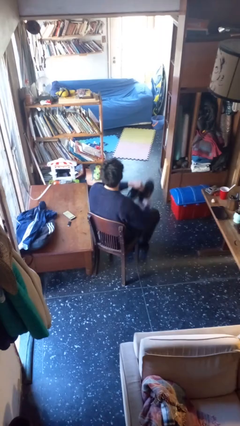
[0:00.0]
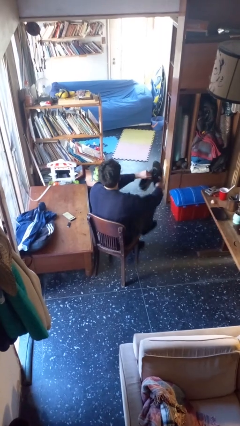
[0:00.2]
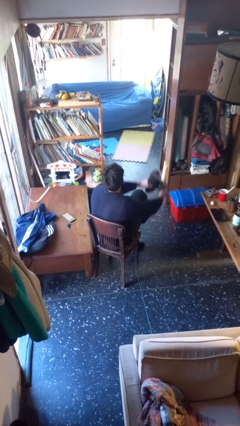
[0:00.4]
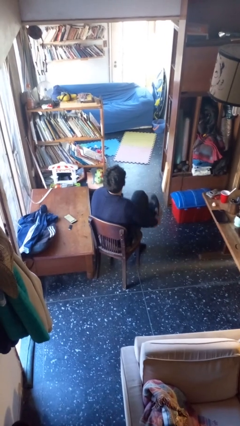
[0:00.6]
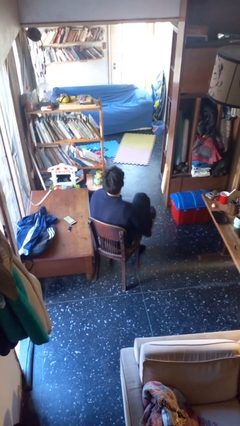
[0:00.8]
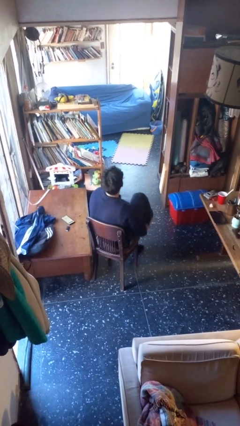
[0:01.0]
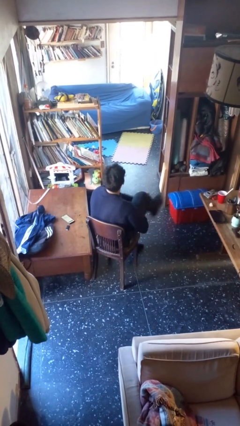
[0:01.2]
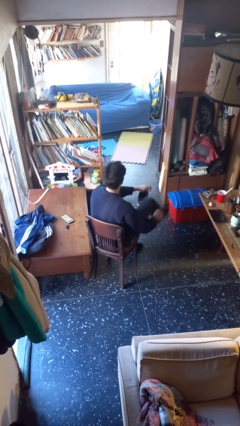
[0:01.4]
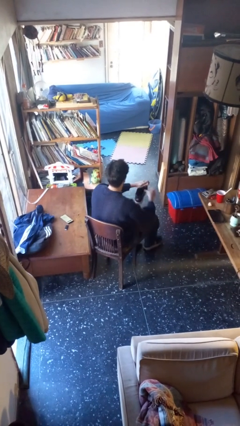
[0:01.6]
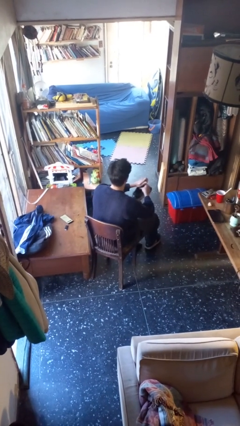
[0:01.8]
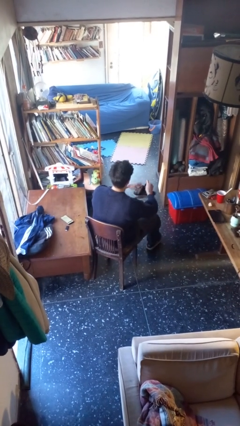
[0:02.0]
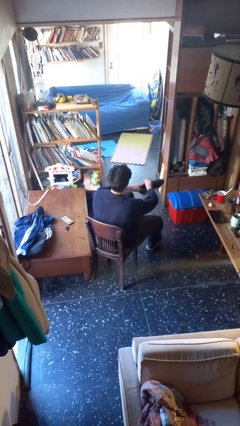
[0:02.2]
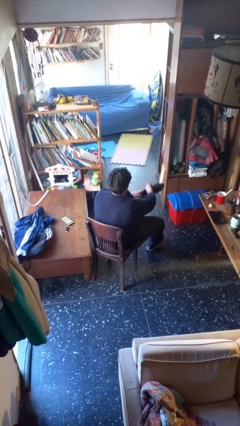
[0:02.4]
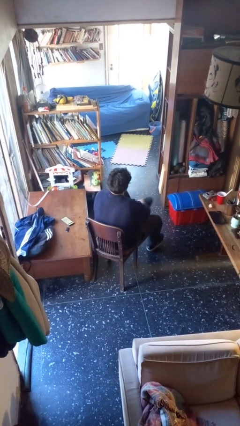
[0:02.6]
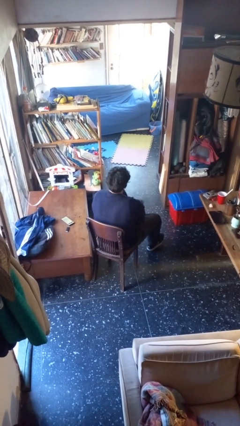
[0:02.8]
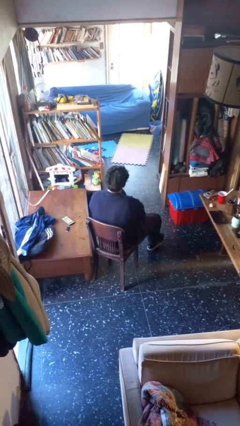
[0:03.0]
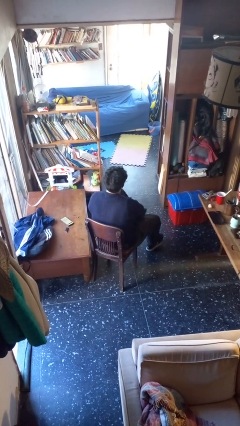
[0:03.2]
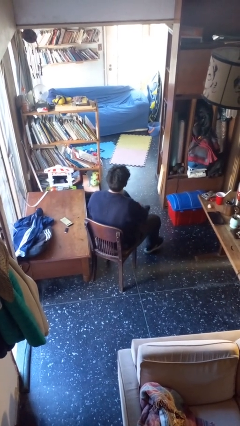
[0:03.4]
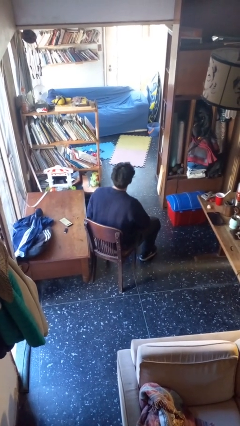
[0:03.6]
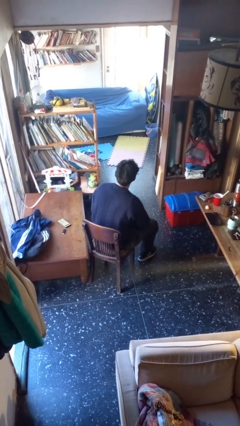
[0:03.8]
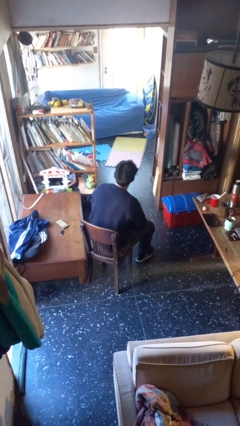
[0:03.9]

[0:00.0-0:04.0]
person puts on shoes

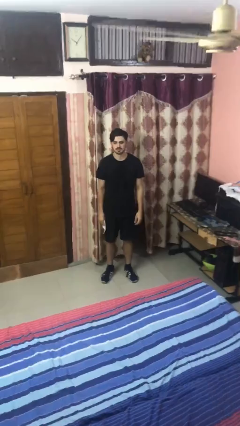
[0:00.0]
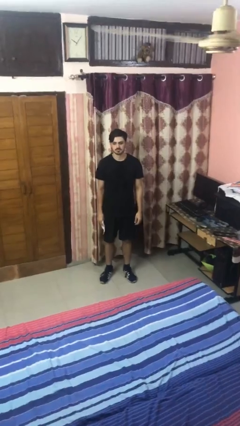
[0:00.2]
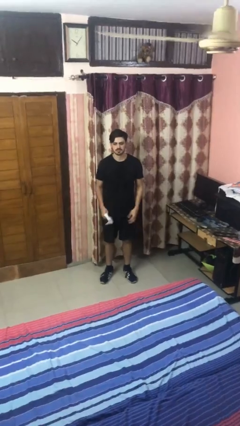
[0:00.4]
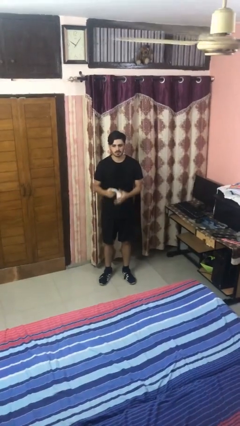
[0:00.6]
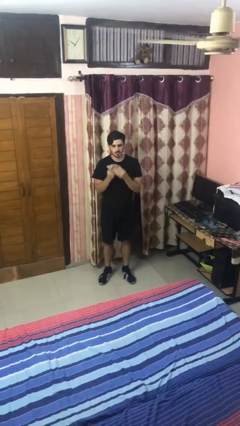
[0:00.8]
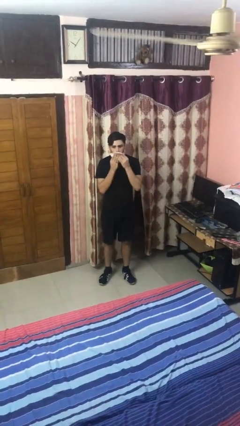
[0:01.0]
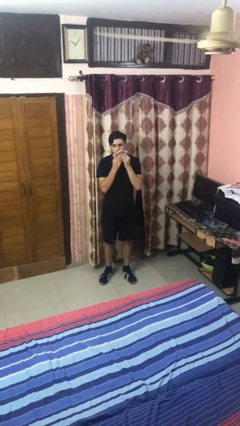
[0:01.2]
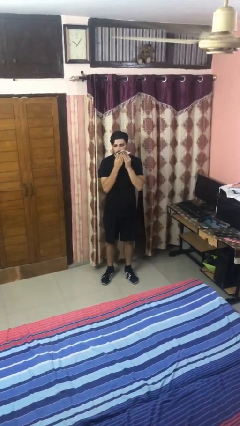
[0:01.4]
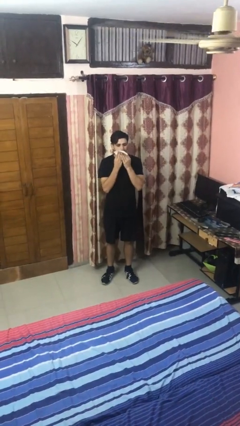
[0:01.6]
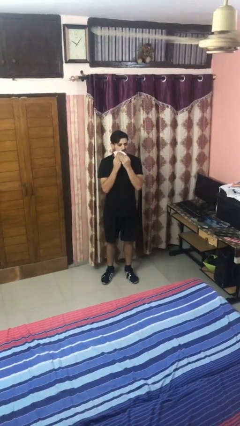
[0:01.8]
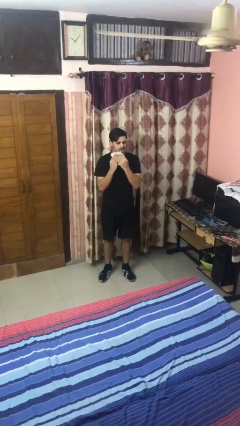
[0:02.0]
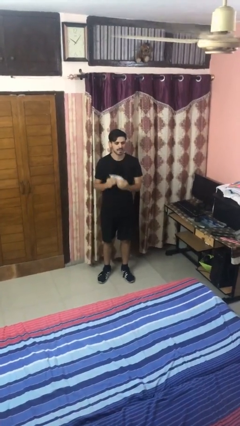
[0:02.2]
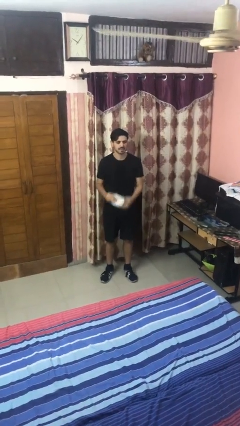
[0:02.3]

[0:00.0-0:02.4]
person wipes mouth with napkin

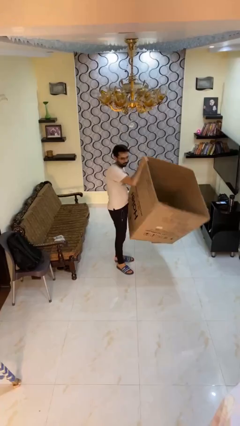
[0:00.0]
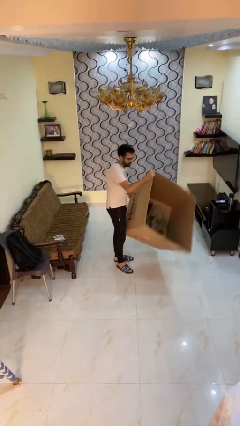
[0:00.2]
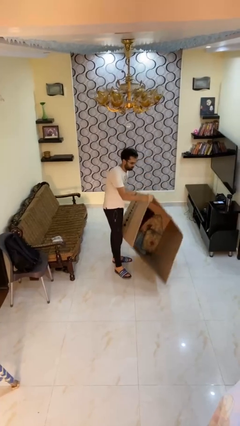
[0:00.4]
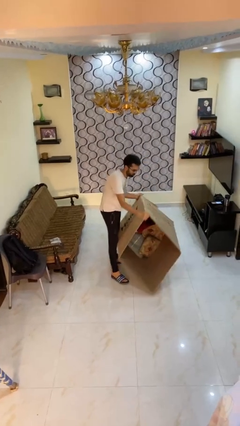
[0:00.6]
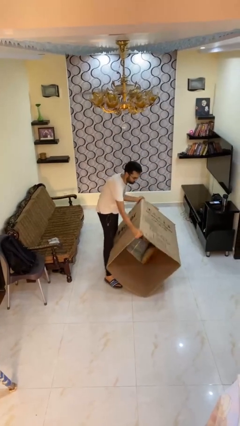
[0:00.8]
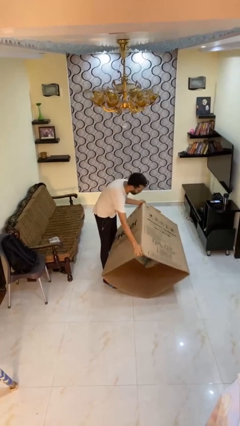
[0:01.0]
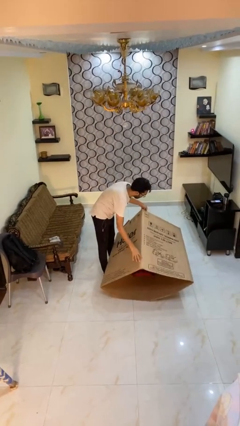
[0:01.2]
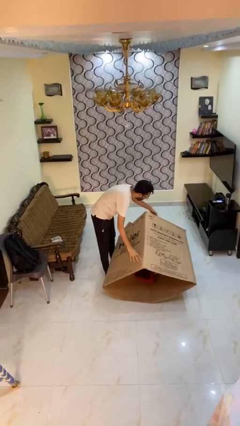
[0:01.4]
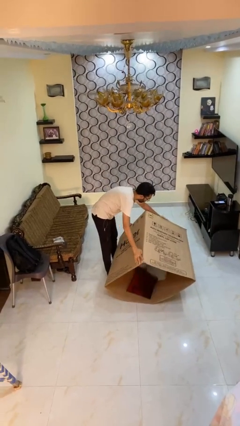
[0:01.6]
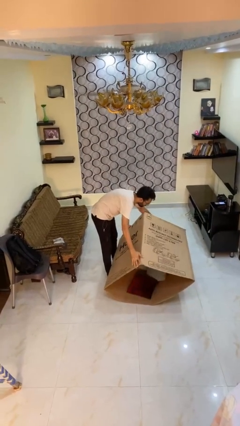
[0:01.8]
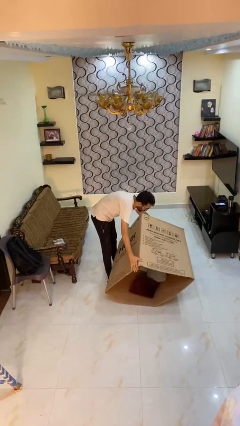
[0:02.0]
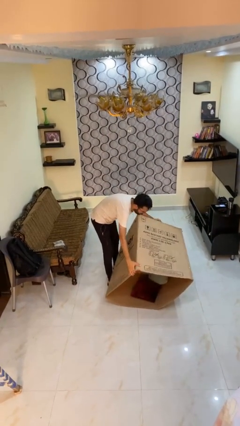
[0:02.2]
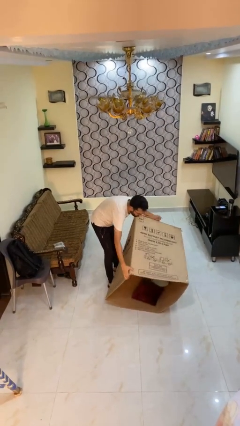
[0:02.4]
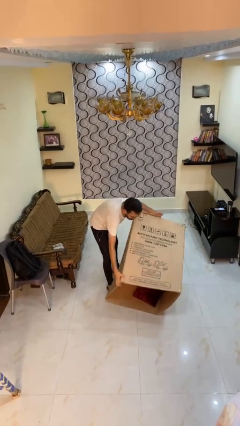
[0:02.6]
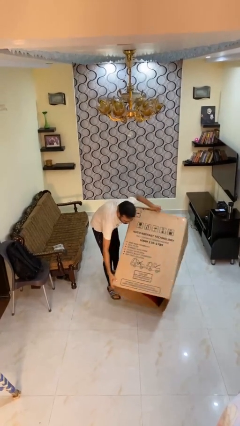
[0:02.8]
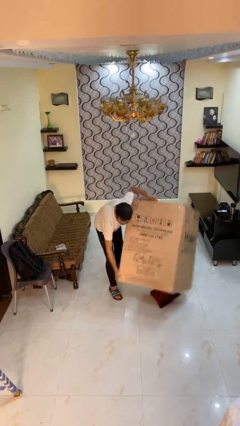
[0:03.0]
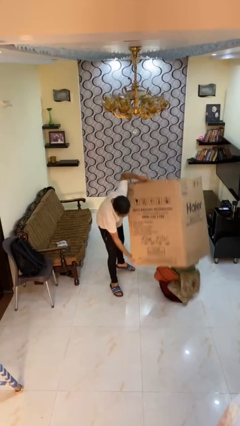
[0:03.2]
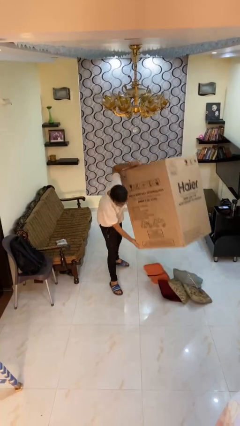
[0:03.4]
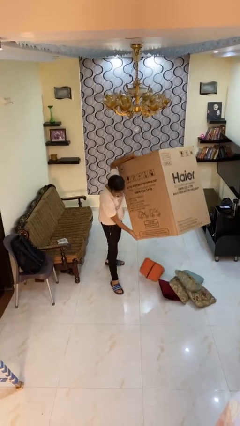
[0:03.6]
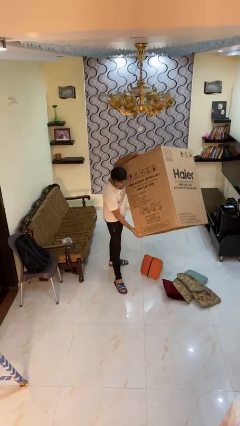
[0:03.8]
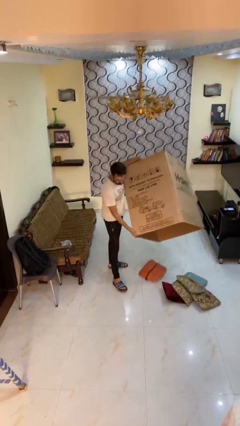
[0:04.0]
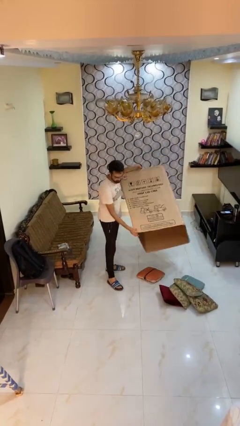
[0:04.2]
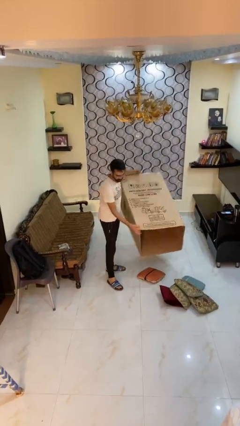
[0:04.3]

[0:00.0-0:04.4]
person unloads box onto floor

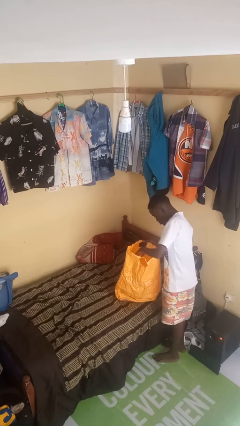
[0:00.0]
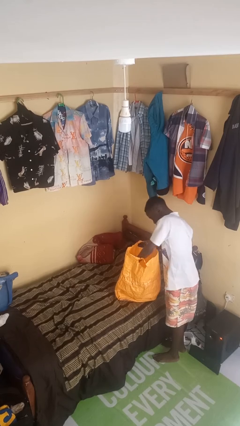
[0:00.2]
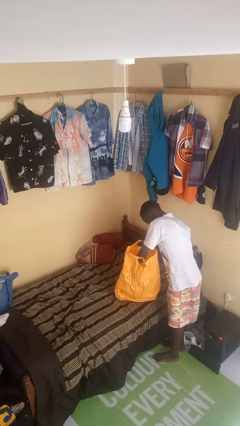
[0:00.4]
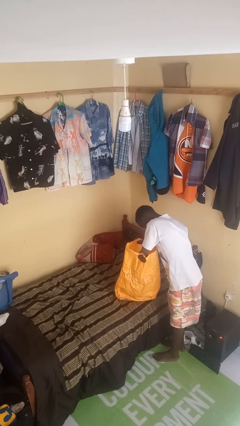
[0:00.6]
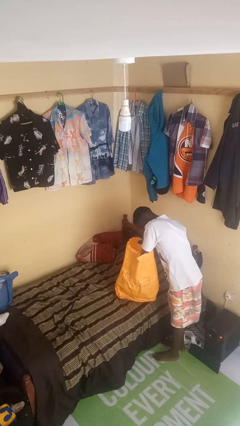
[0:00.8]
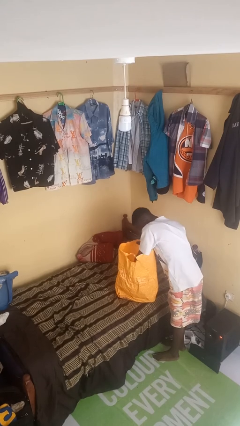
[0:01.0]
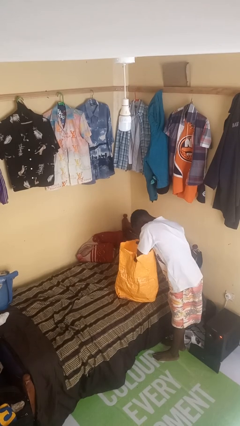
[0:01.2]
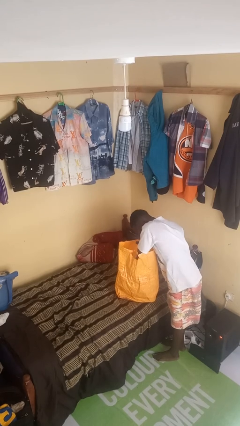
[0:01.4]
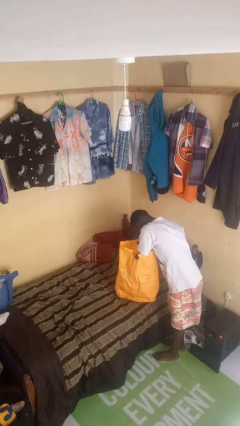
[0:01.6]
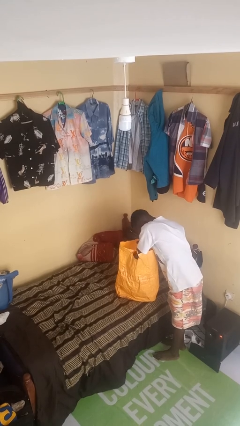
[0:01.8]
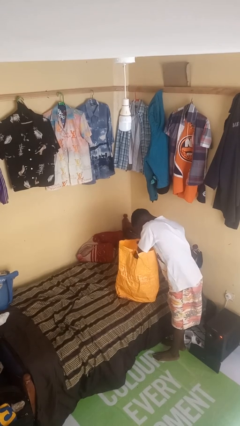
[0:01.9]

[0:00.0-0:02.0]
person searches in bag

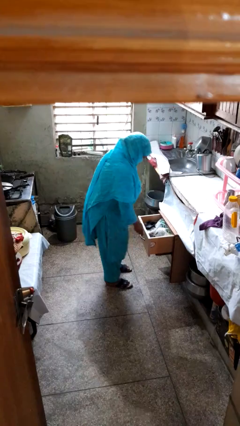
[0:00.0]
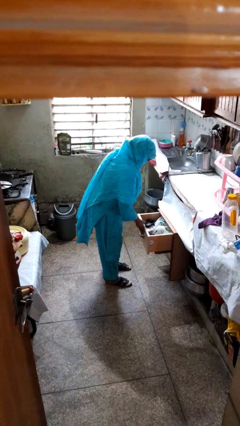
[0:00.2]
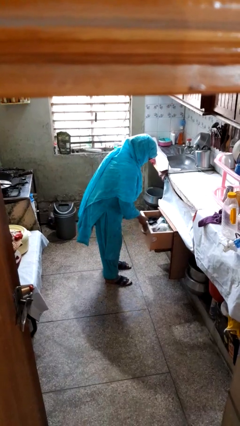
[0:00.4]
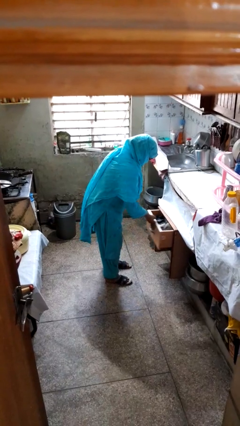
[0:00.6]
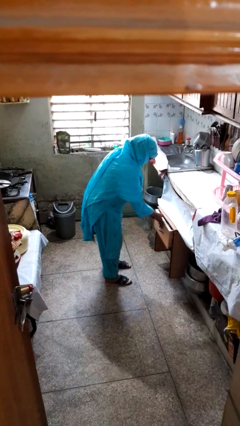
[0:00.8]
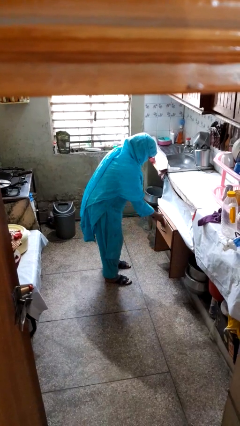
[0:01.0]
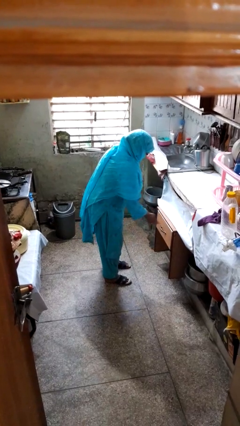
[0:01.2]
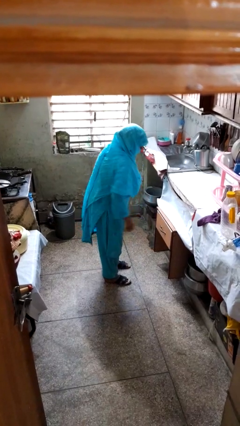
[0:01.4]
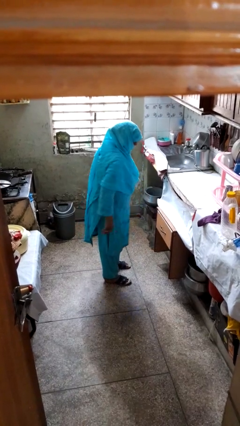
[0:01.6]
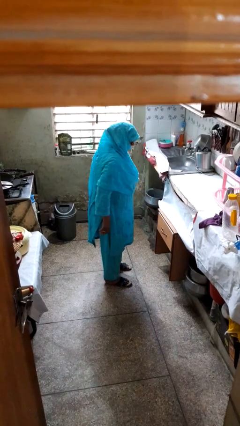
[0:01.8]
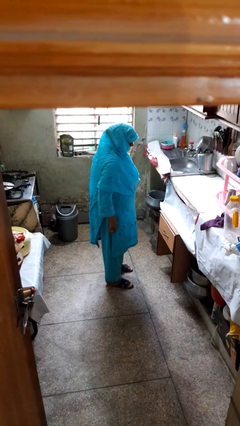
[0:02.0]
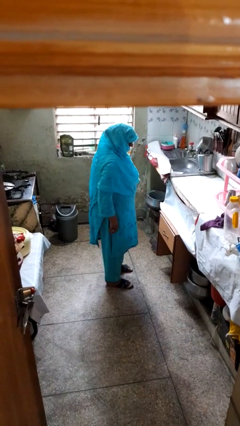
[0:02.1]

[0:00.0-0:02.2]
person closes kitchen drawer

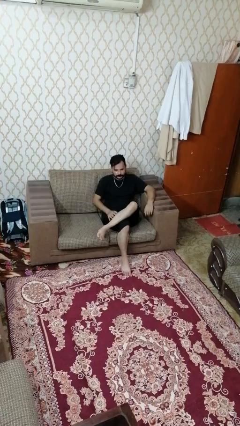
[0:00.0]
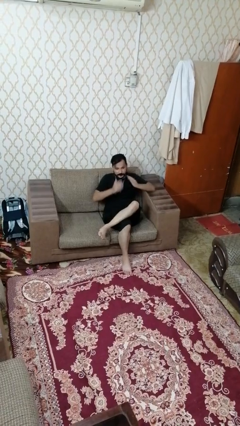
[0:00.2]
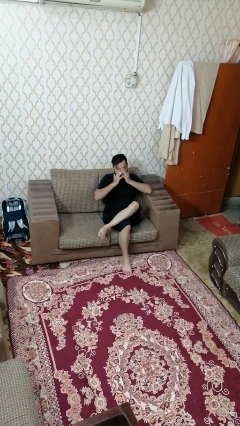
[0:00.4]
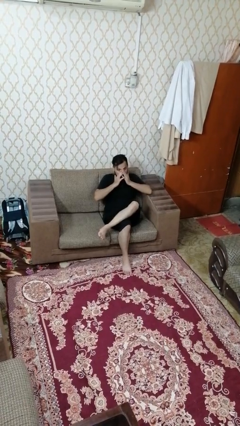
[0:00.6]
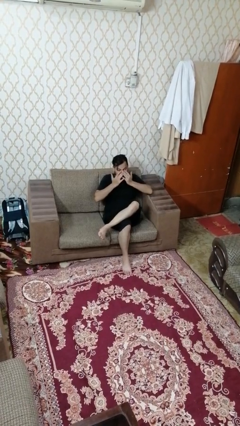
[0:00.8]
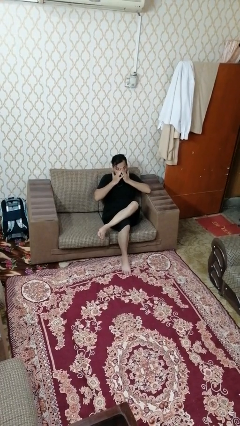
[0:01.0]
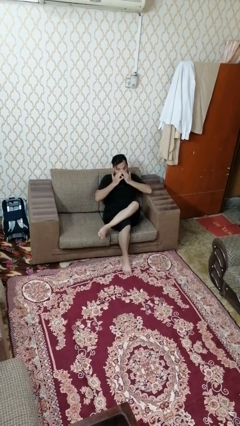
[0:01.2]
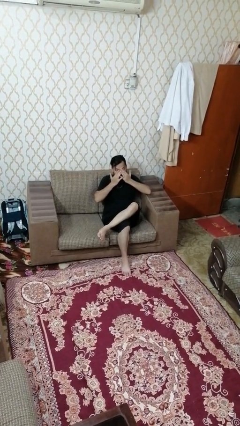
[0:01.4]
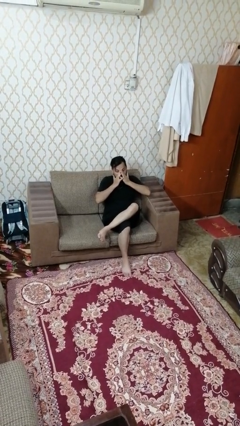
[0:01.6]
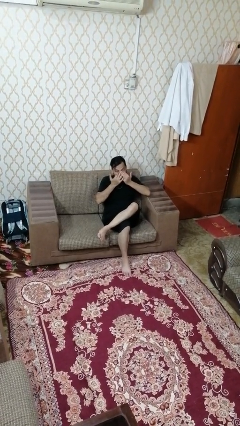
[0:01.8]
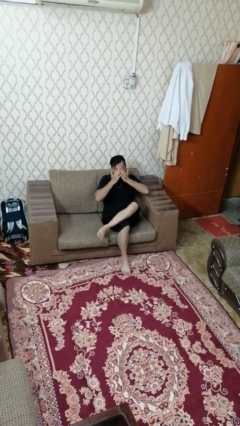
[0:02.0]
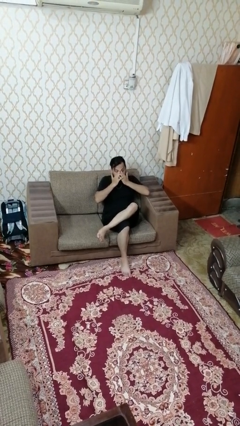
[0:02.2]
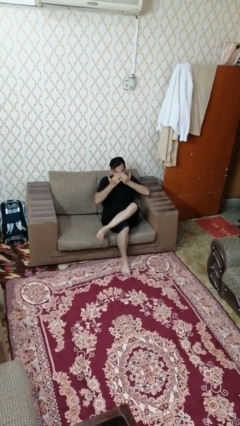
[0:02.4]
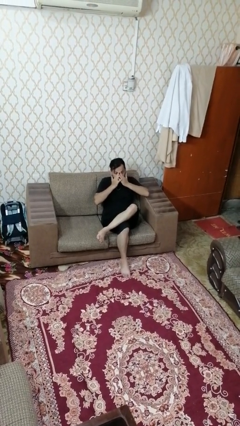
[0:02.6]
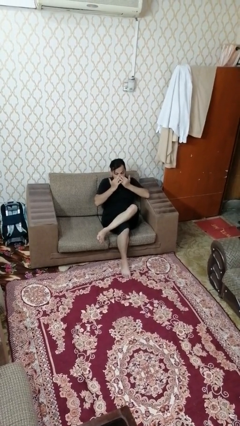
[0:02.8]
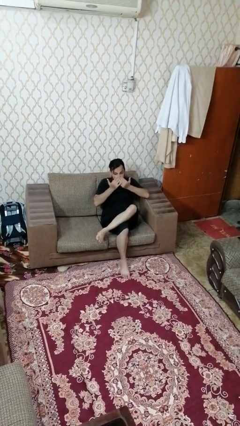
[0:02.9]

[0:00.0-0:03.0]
person rubs eyes
